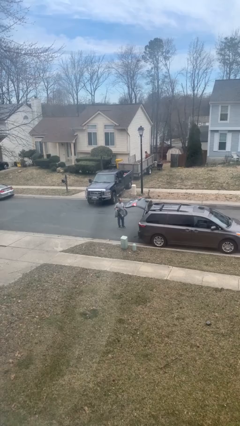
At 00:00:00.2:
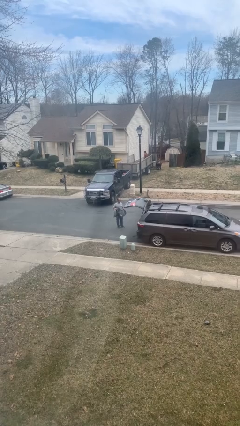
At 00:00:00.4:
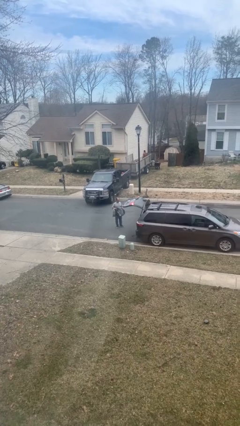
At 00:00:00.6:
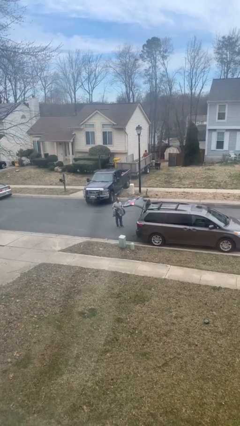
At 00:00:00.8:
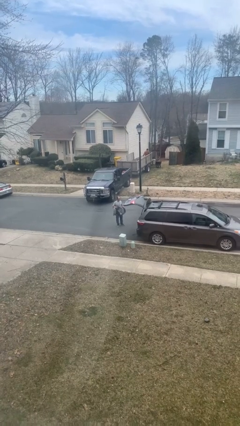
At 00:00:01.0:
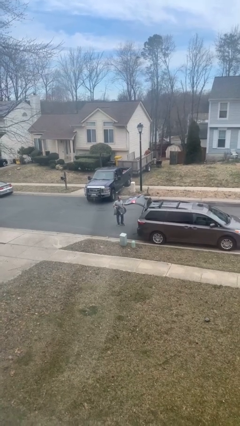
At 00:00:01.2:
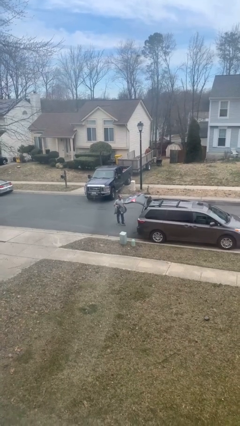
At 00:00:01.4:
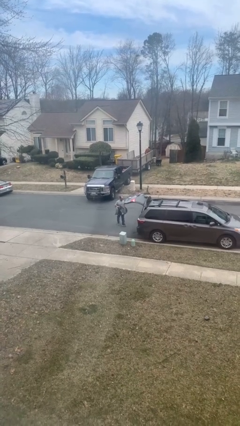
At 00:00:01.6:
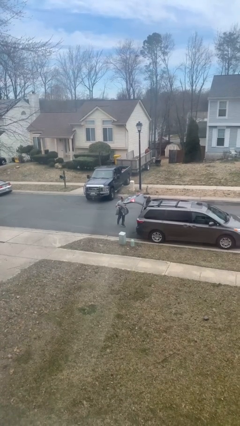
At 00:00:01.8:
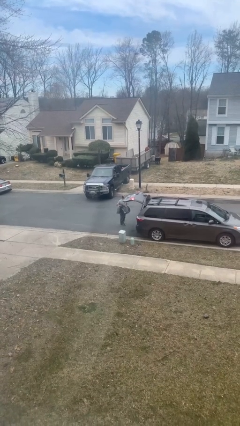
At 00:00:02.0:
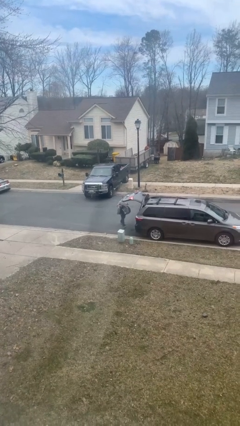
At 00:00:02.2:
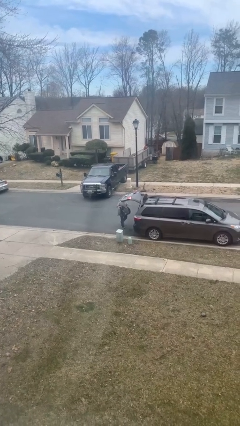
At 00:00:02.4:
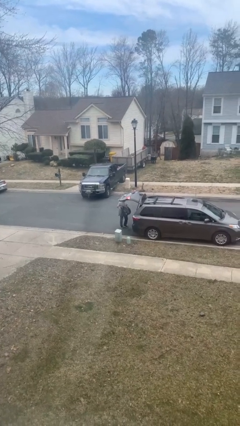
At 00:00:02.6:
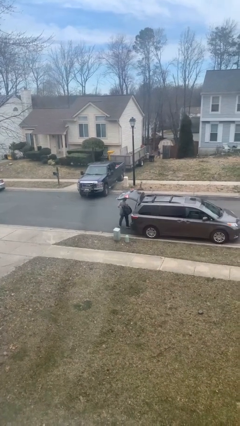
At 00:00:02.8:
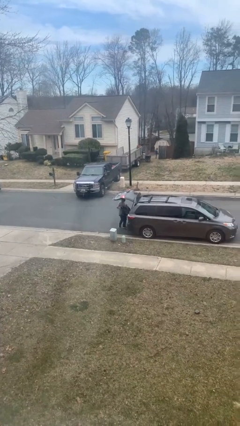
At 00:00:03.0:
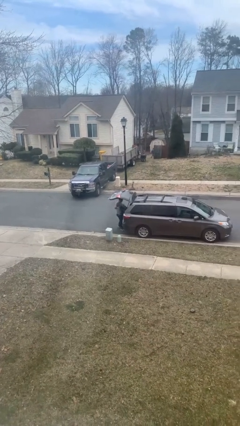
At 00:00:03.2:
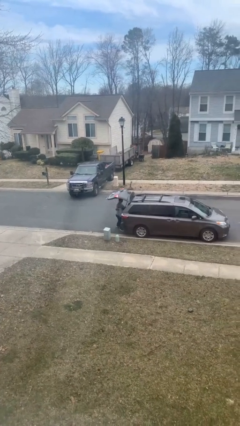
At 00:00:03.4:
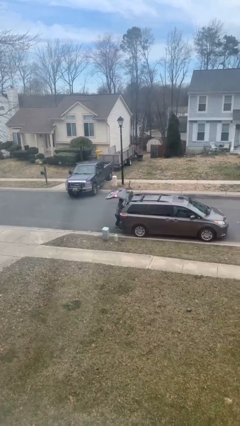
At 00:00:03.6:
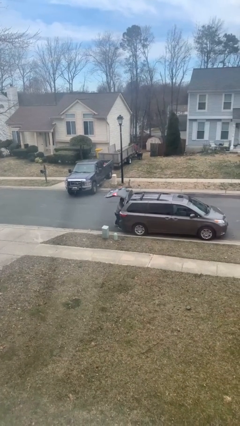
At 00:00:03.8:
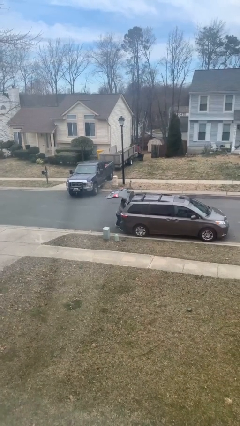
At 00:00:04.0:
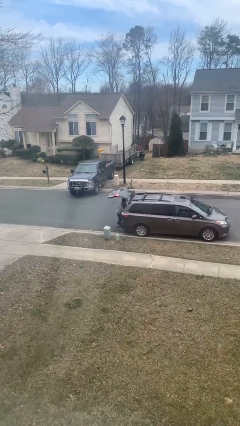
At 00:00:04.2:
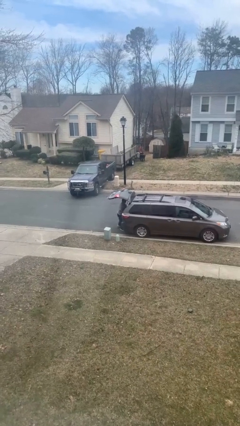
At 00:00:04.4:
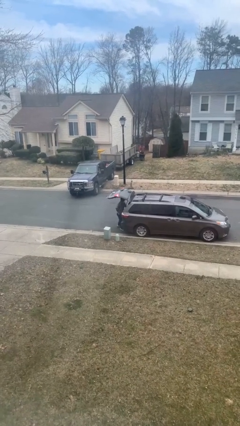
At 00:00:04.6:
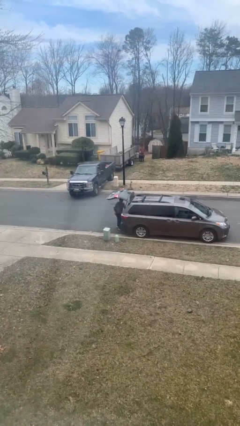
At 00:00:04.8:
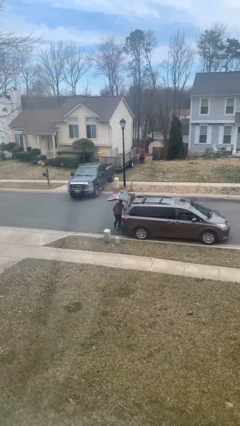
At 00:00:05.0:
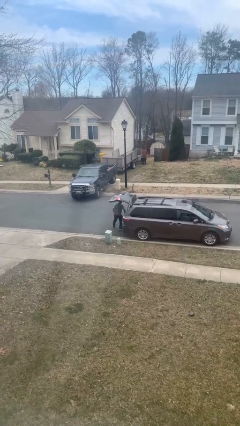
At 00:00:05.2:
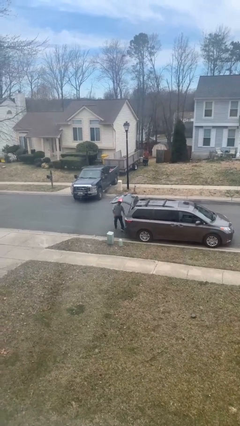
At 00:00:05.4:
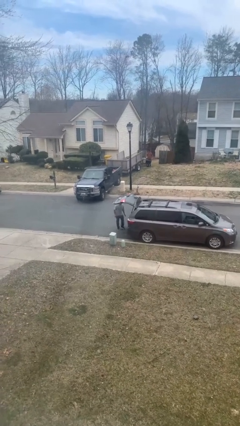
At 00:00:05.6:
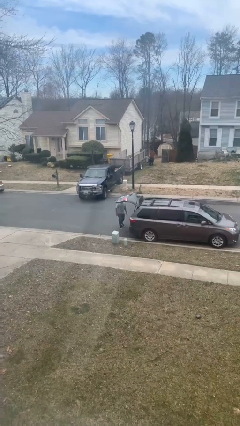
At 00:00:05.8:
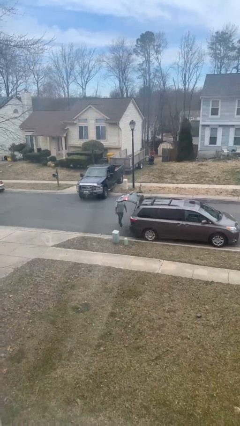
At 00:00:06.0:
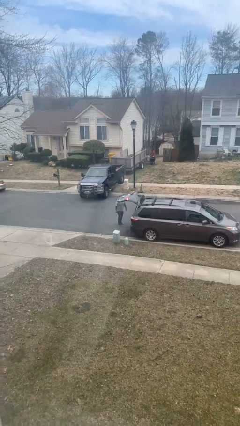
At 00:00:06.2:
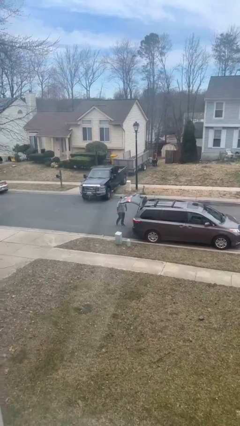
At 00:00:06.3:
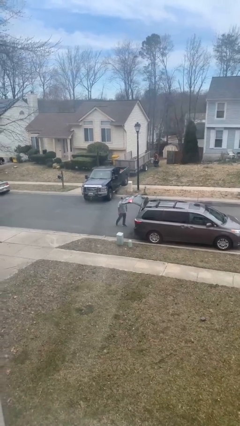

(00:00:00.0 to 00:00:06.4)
person loads car

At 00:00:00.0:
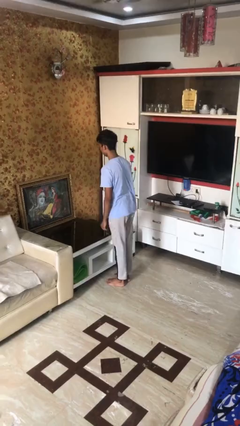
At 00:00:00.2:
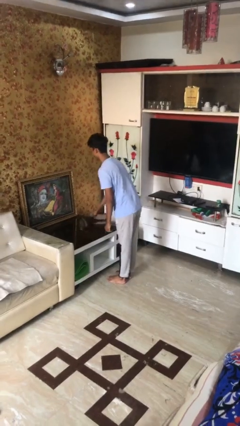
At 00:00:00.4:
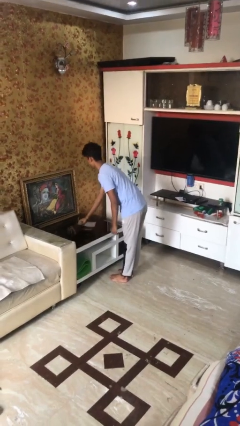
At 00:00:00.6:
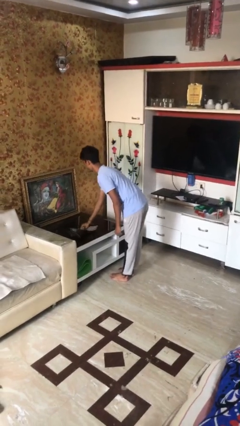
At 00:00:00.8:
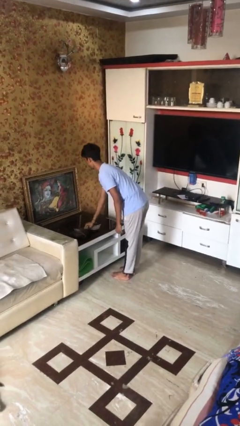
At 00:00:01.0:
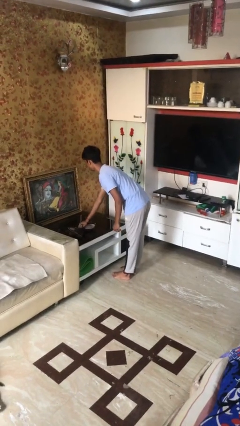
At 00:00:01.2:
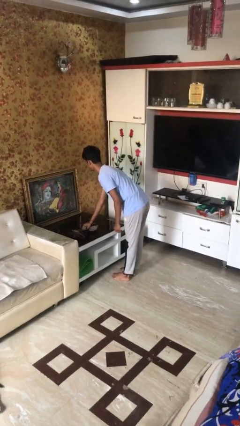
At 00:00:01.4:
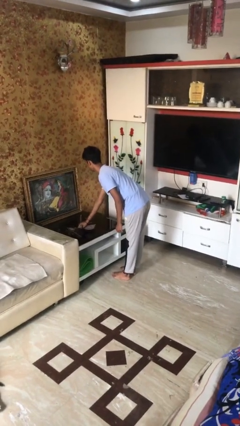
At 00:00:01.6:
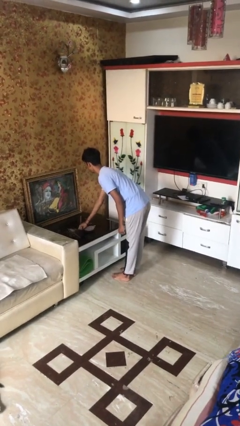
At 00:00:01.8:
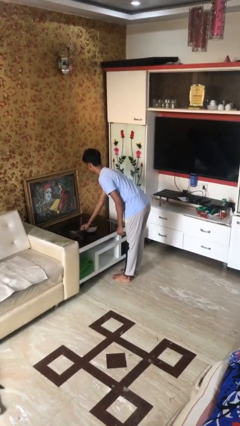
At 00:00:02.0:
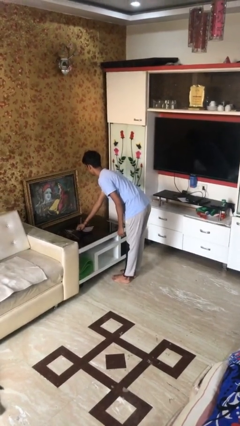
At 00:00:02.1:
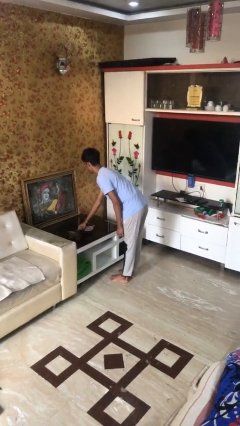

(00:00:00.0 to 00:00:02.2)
person cleans table with rag

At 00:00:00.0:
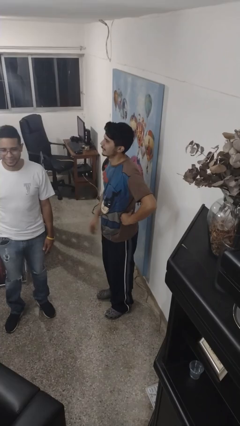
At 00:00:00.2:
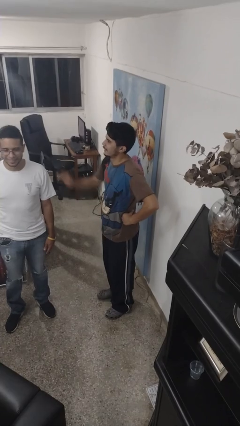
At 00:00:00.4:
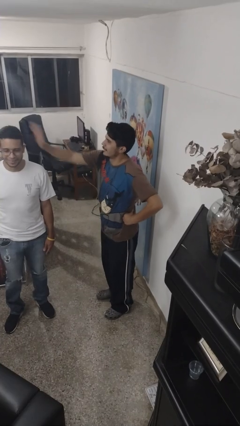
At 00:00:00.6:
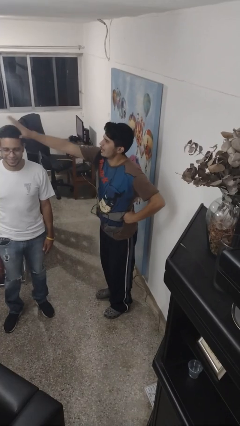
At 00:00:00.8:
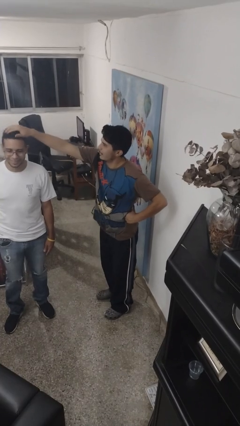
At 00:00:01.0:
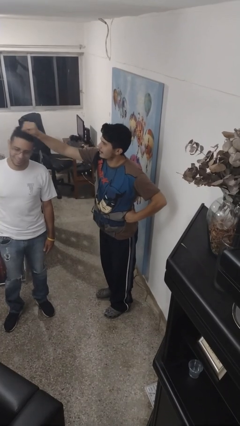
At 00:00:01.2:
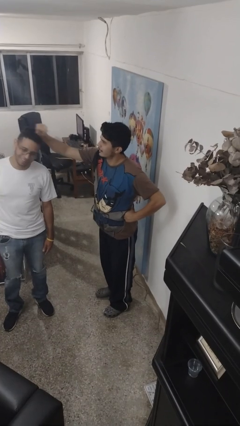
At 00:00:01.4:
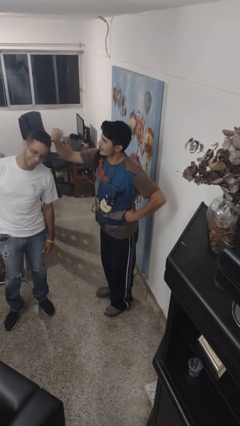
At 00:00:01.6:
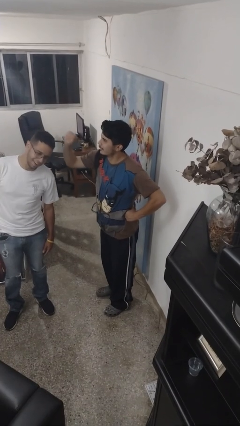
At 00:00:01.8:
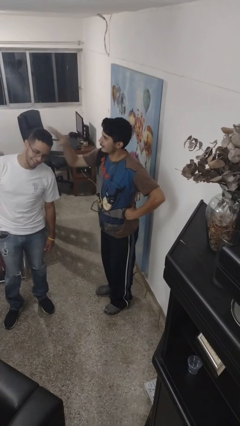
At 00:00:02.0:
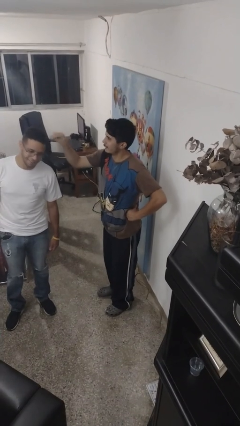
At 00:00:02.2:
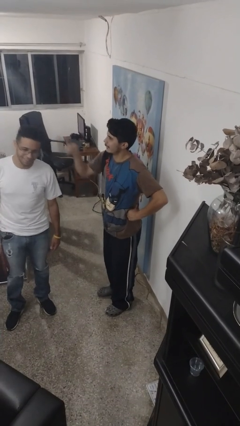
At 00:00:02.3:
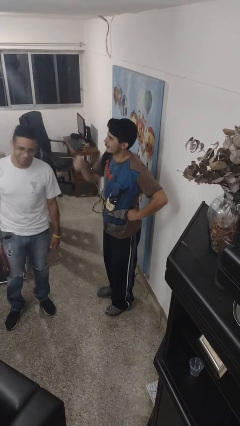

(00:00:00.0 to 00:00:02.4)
person grabs person by hair

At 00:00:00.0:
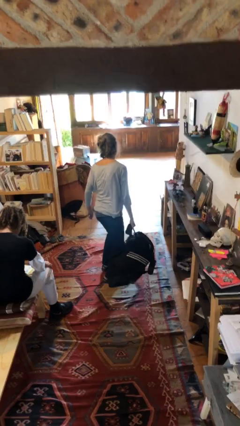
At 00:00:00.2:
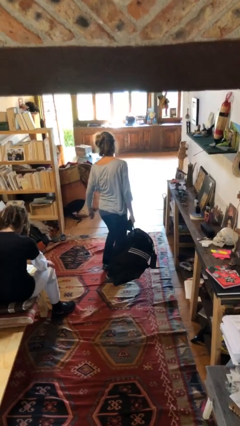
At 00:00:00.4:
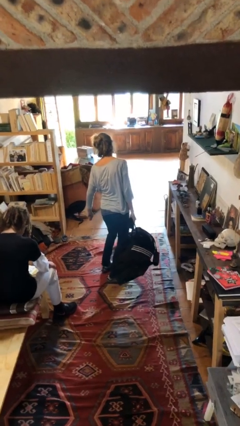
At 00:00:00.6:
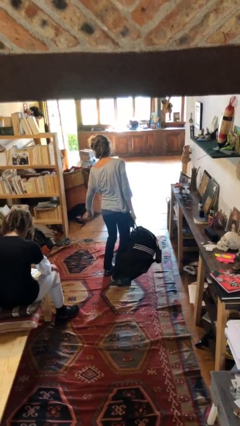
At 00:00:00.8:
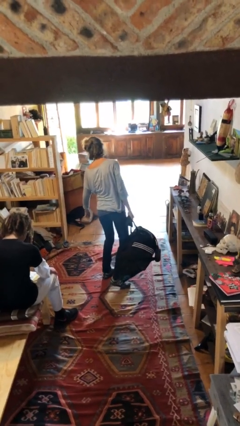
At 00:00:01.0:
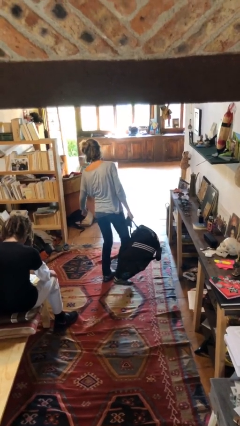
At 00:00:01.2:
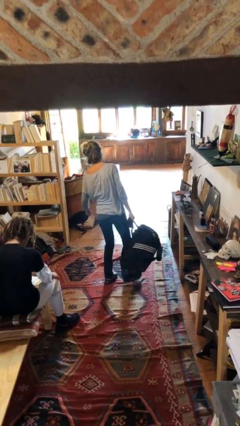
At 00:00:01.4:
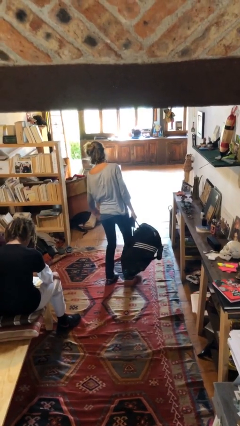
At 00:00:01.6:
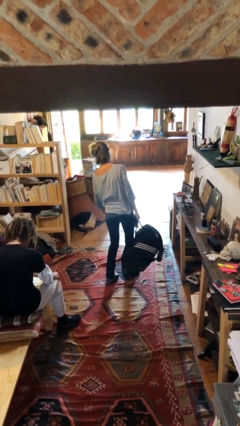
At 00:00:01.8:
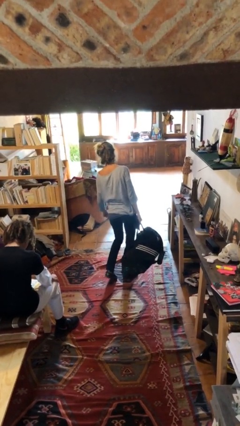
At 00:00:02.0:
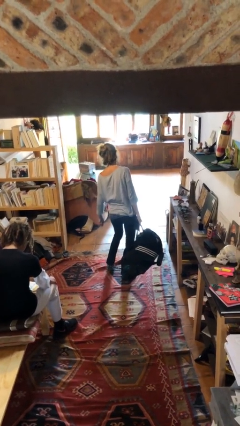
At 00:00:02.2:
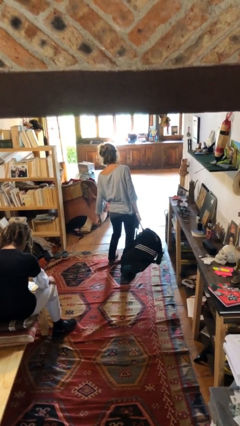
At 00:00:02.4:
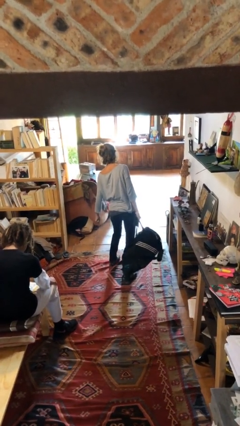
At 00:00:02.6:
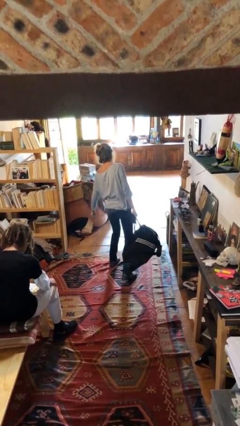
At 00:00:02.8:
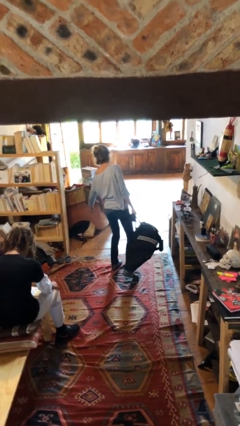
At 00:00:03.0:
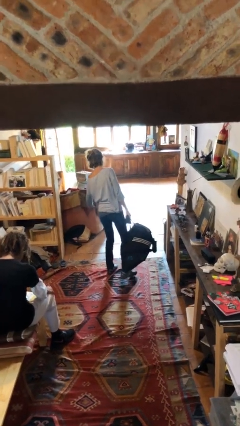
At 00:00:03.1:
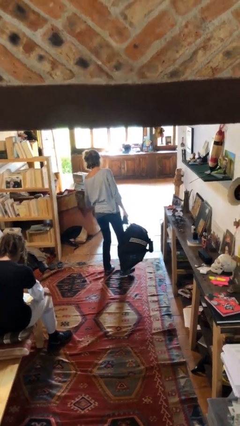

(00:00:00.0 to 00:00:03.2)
person carries heavy object

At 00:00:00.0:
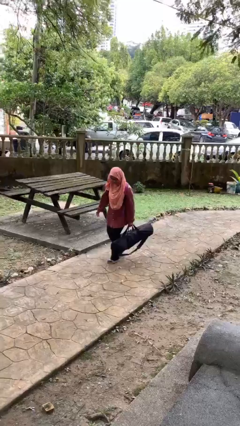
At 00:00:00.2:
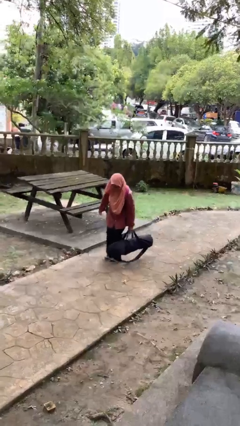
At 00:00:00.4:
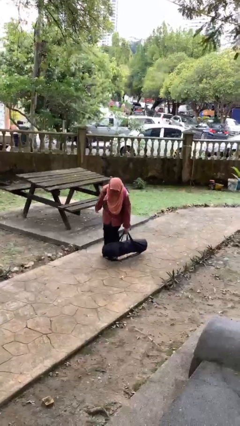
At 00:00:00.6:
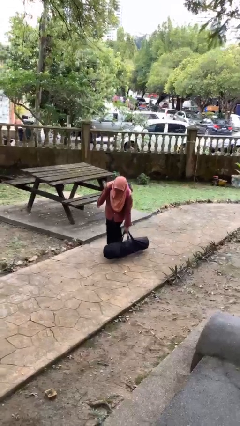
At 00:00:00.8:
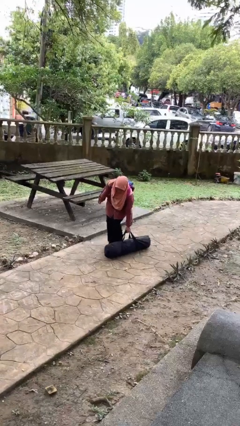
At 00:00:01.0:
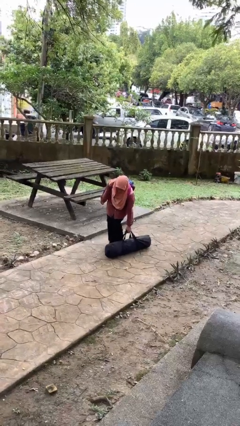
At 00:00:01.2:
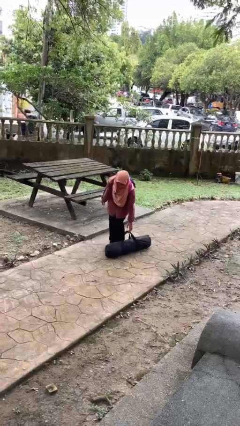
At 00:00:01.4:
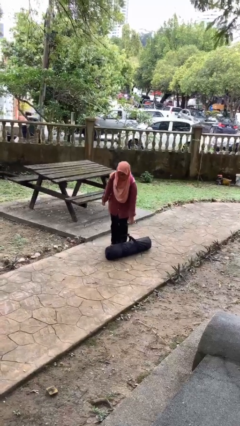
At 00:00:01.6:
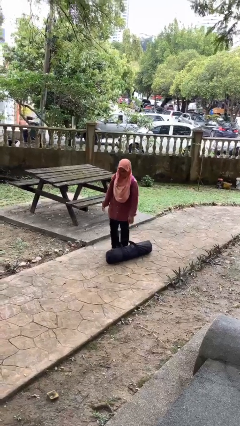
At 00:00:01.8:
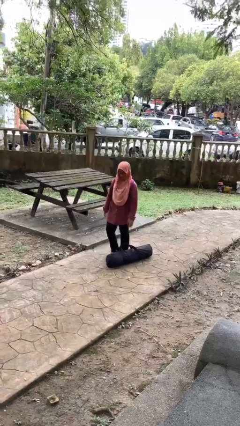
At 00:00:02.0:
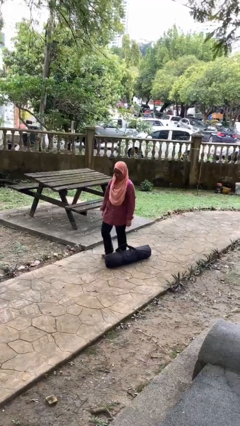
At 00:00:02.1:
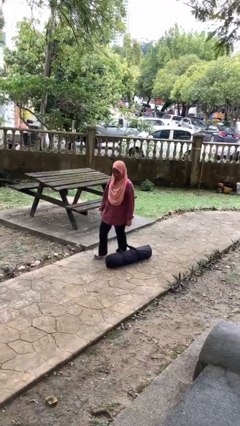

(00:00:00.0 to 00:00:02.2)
person puts down object on floor

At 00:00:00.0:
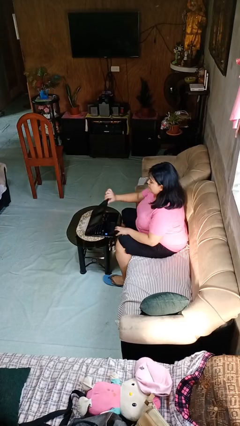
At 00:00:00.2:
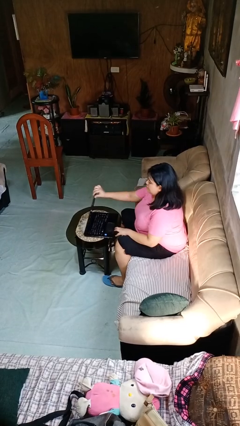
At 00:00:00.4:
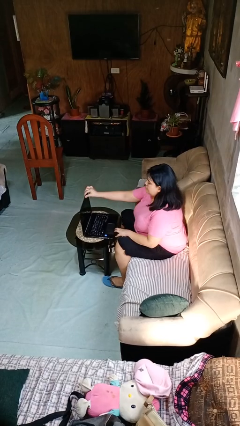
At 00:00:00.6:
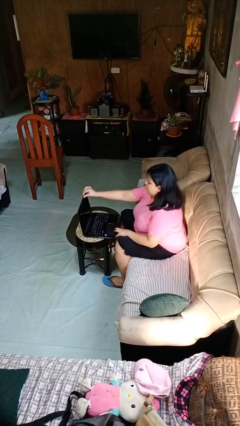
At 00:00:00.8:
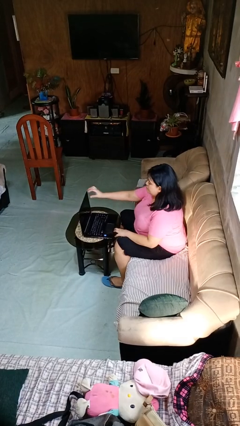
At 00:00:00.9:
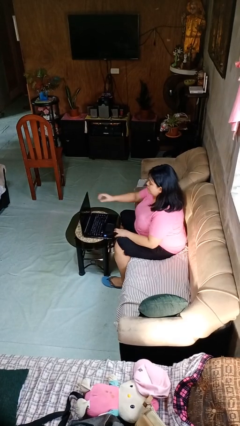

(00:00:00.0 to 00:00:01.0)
person opens laptop
